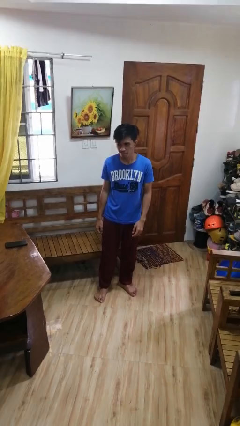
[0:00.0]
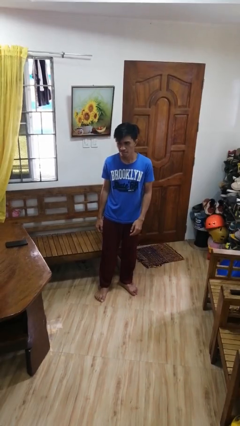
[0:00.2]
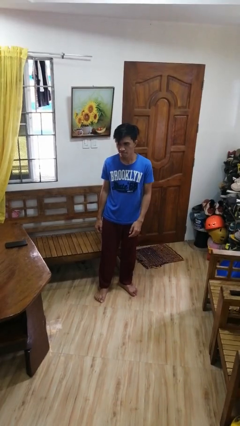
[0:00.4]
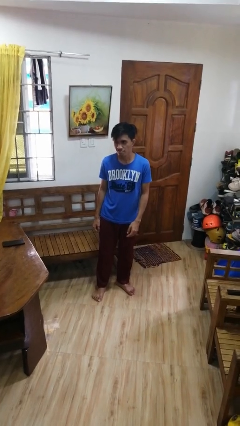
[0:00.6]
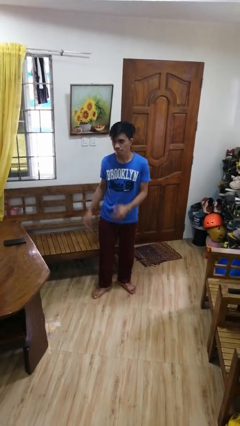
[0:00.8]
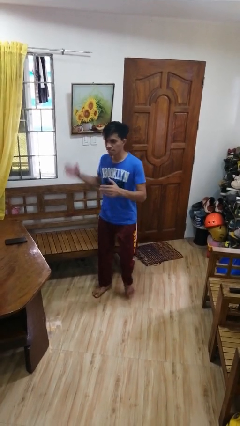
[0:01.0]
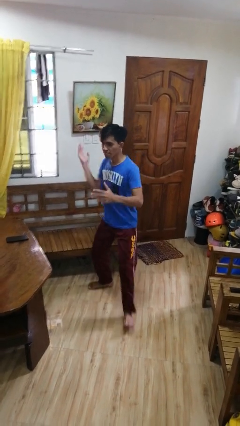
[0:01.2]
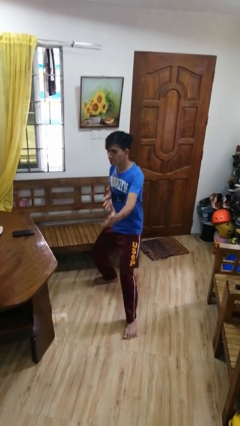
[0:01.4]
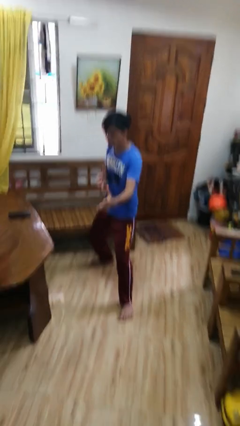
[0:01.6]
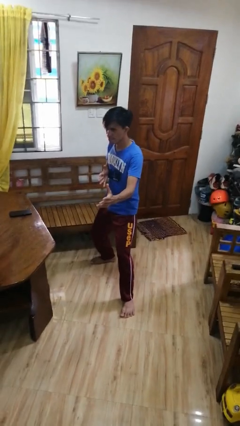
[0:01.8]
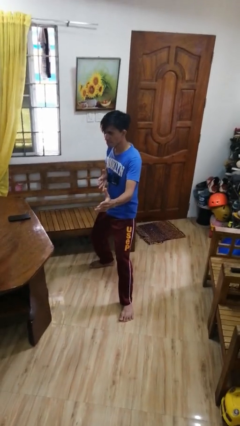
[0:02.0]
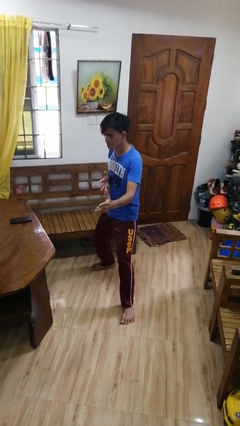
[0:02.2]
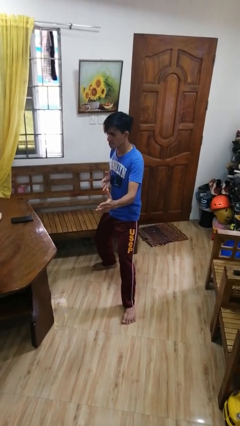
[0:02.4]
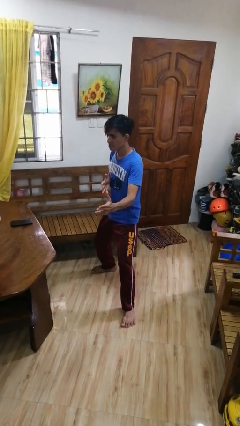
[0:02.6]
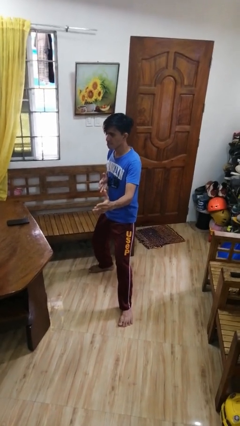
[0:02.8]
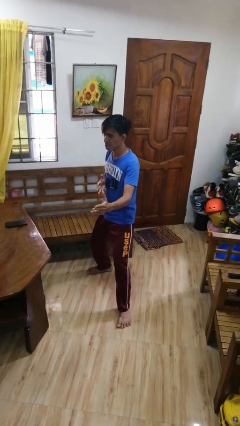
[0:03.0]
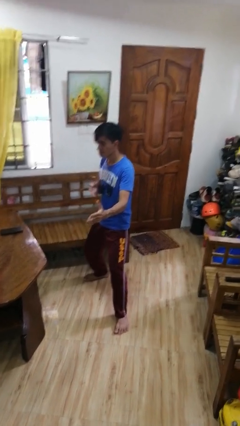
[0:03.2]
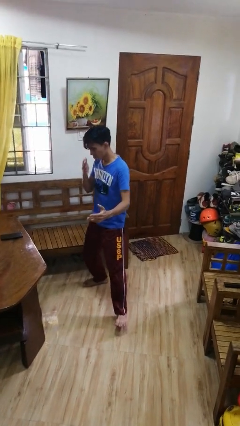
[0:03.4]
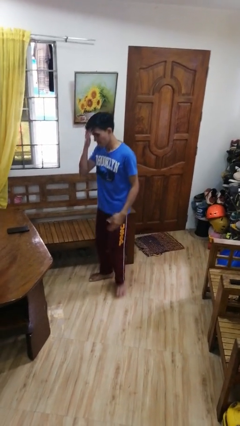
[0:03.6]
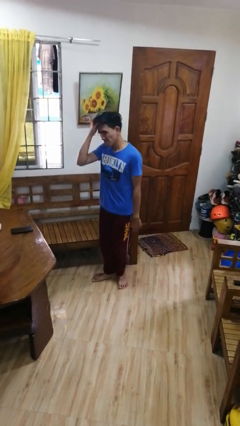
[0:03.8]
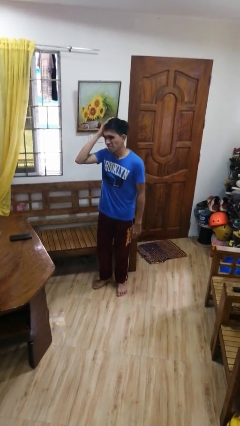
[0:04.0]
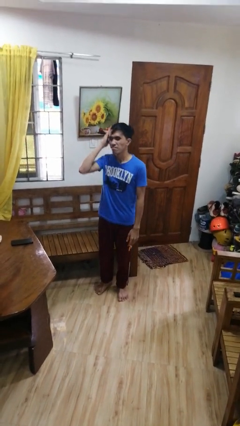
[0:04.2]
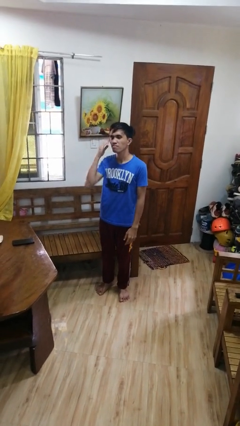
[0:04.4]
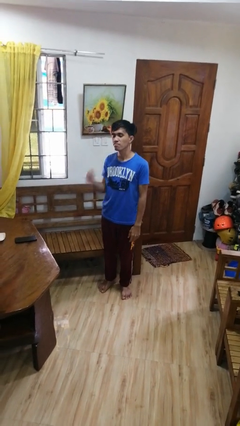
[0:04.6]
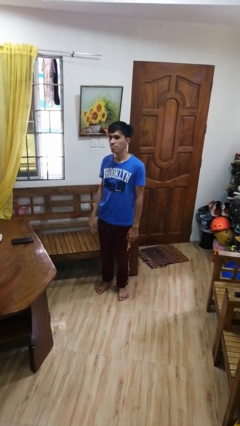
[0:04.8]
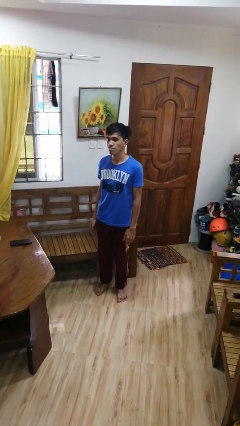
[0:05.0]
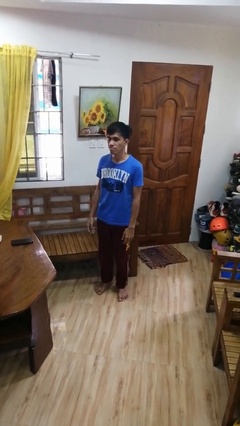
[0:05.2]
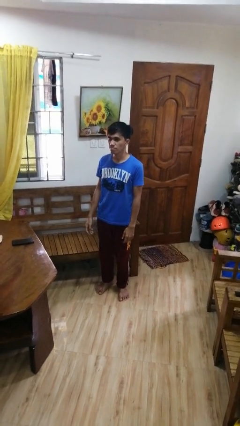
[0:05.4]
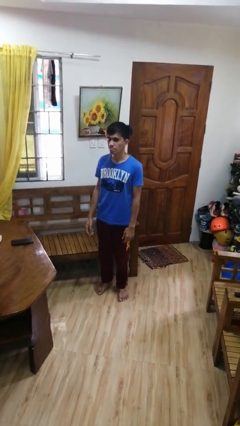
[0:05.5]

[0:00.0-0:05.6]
person karate chop

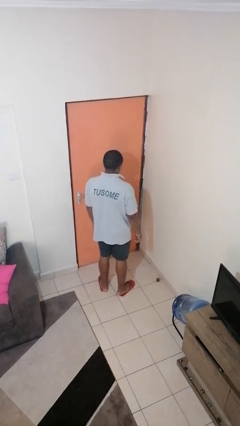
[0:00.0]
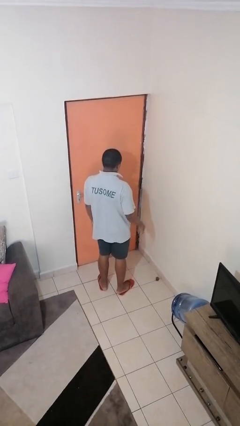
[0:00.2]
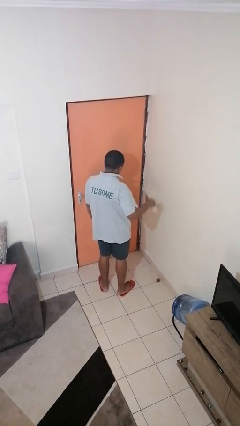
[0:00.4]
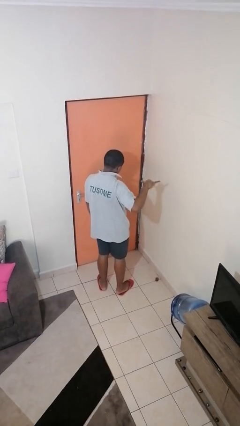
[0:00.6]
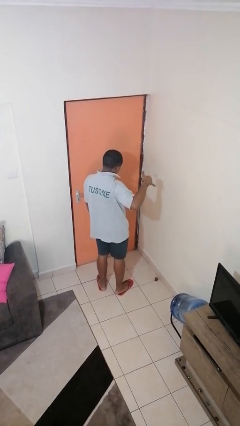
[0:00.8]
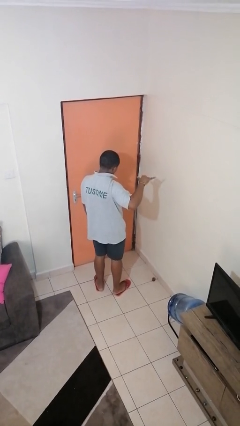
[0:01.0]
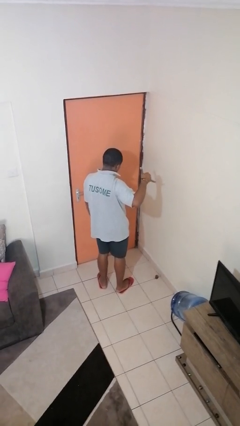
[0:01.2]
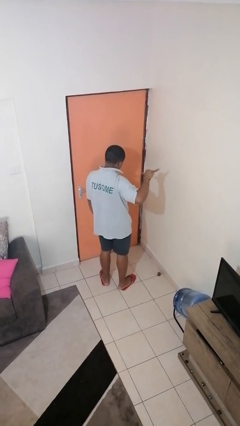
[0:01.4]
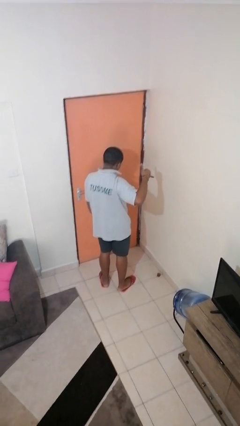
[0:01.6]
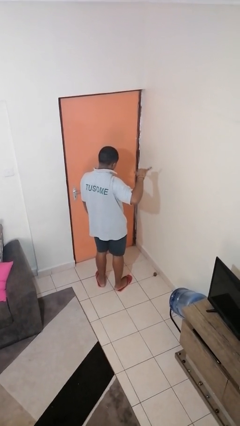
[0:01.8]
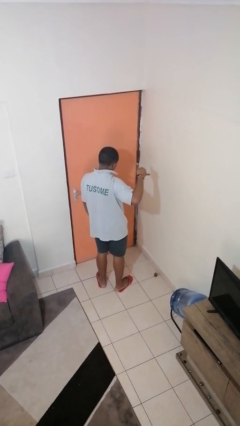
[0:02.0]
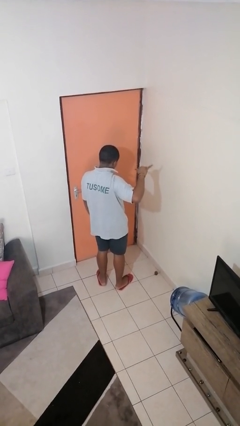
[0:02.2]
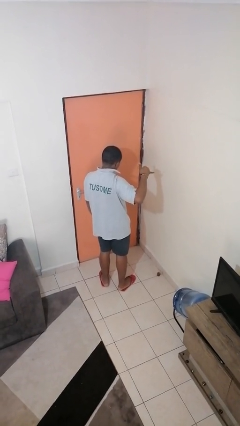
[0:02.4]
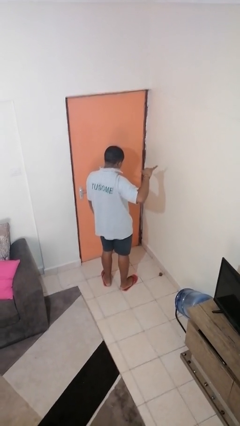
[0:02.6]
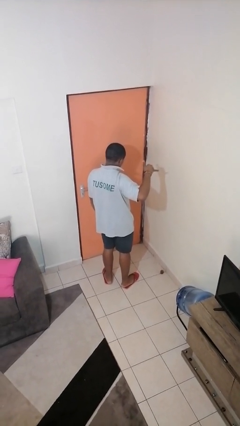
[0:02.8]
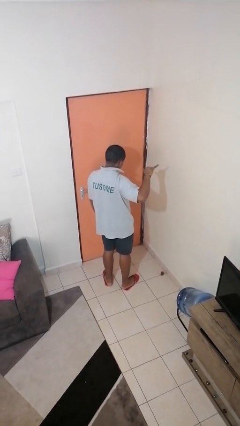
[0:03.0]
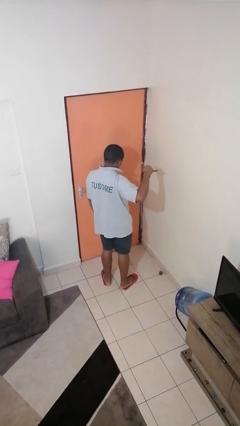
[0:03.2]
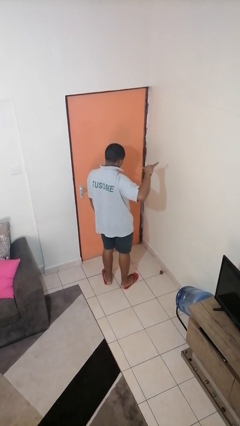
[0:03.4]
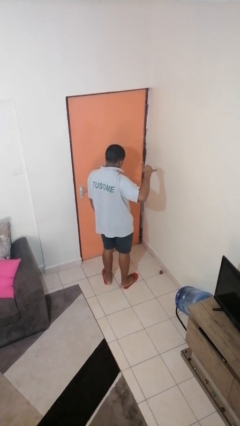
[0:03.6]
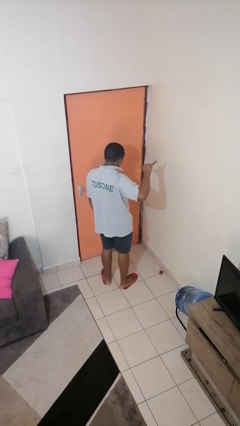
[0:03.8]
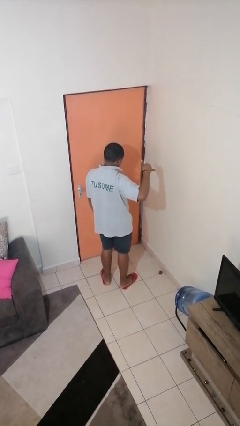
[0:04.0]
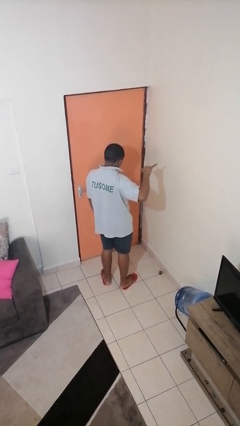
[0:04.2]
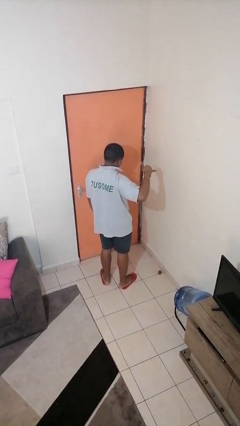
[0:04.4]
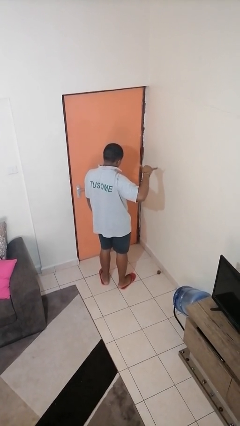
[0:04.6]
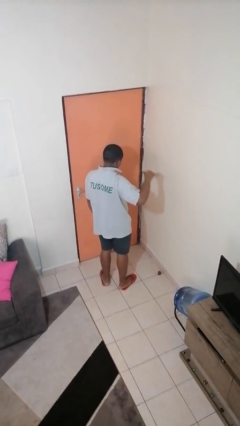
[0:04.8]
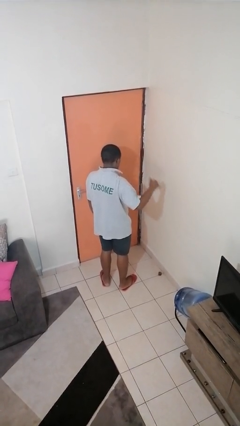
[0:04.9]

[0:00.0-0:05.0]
person gestures hang loose

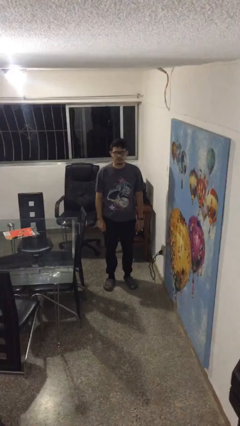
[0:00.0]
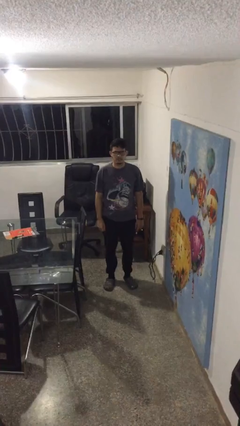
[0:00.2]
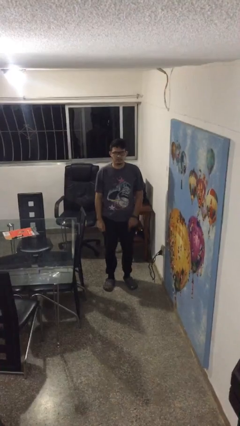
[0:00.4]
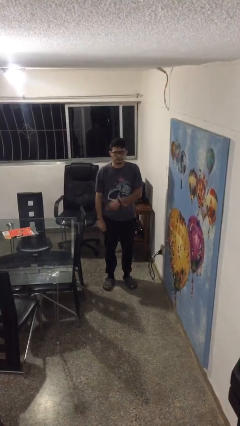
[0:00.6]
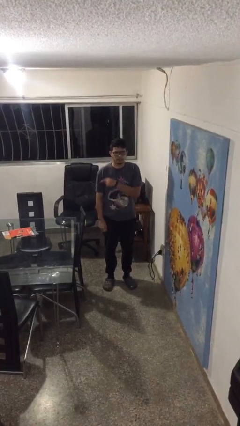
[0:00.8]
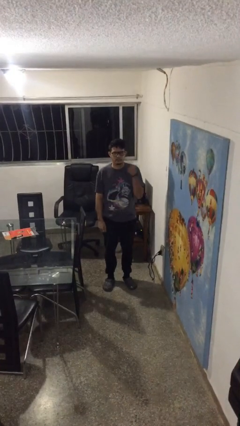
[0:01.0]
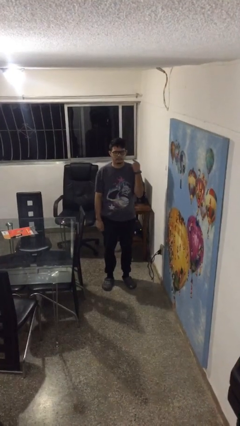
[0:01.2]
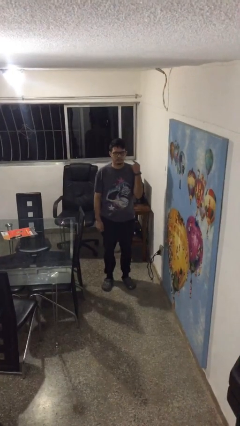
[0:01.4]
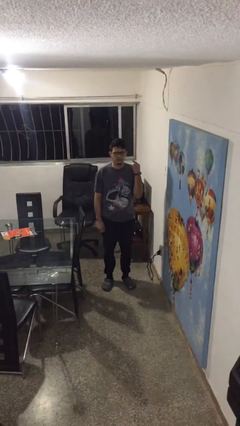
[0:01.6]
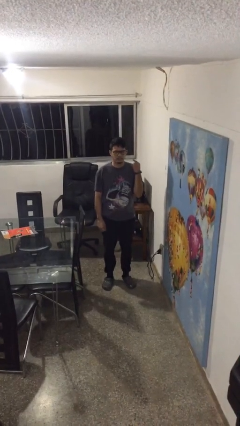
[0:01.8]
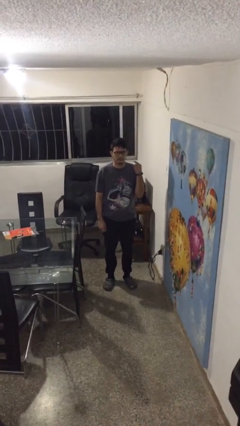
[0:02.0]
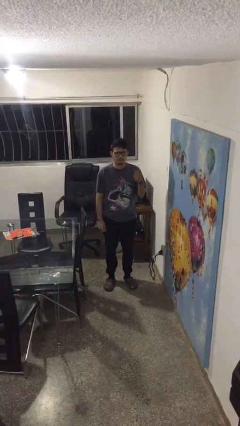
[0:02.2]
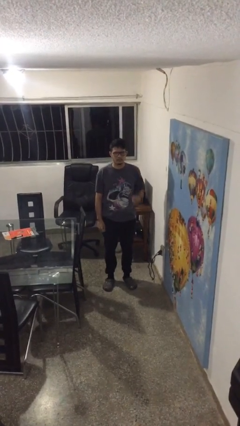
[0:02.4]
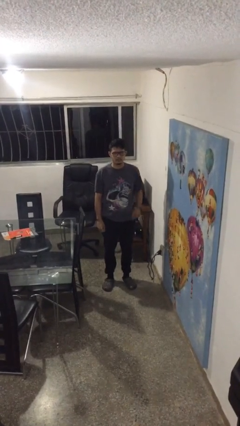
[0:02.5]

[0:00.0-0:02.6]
person gestures cut

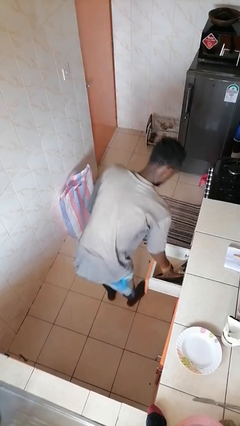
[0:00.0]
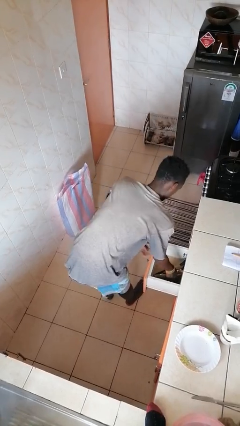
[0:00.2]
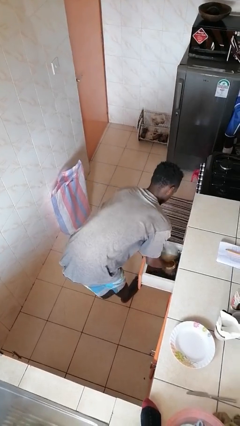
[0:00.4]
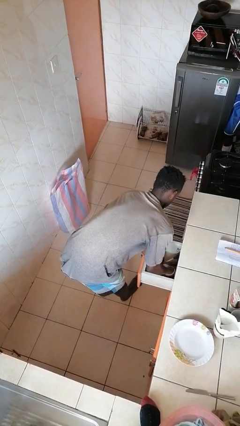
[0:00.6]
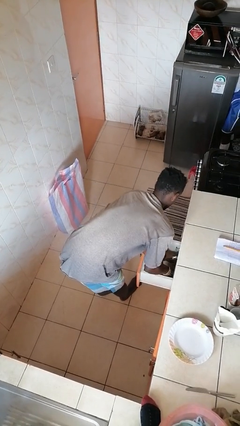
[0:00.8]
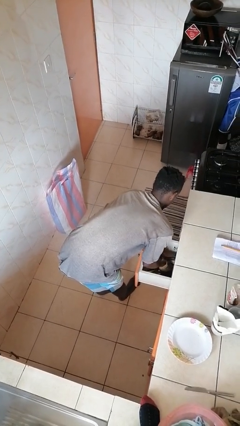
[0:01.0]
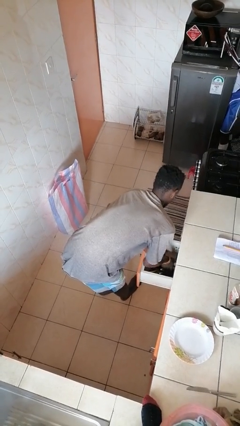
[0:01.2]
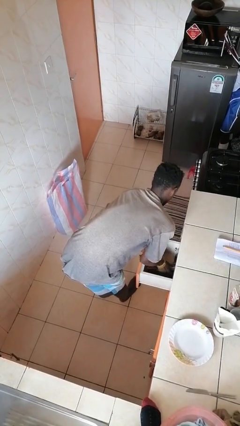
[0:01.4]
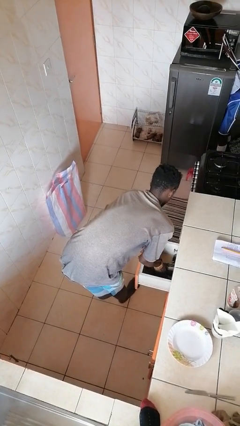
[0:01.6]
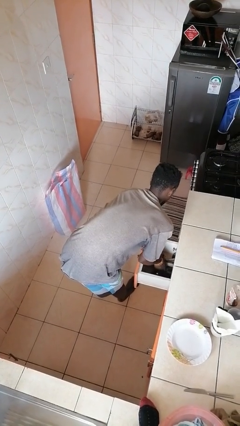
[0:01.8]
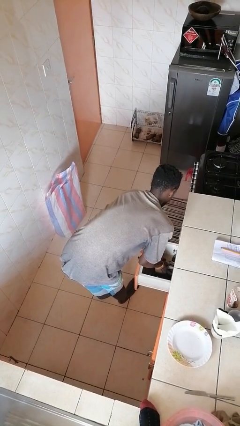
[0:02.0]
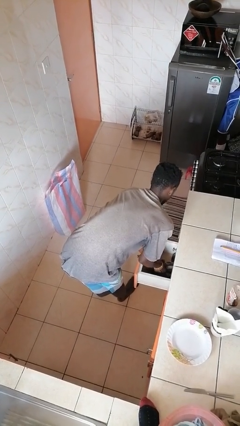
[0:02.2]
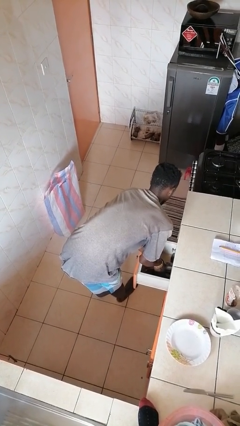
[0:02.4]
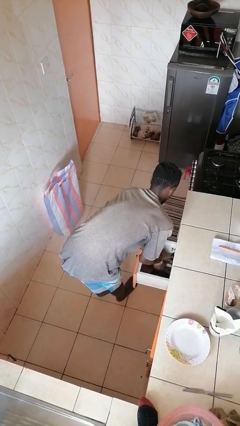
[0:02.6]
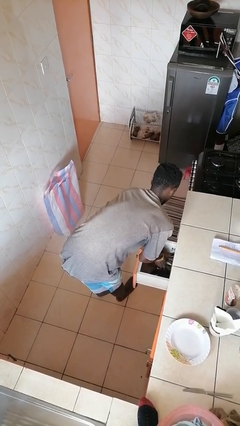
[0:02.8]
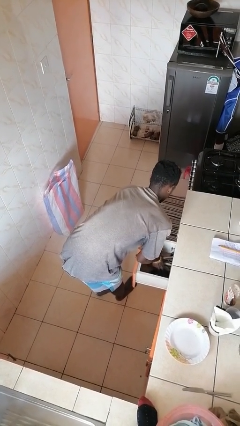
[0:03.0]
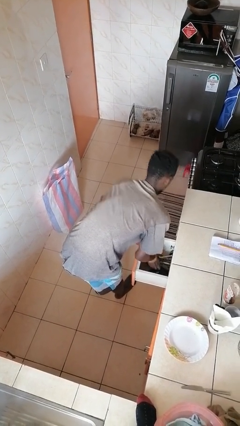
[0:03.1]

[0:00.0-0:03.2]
person searches in kitchen drawer

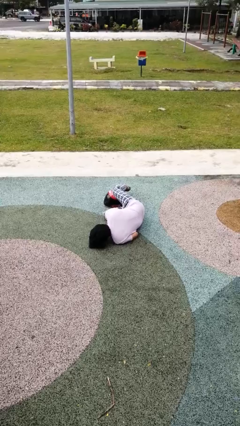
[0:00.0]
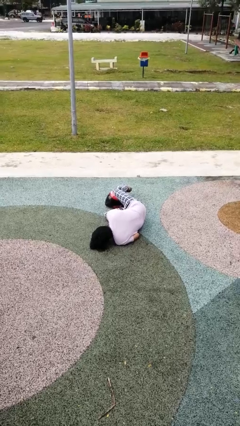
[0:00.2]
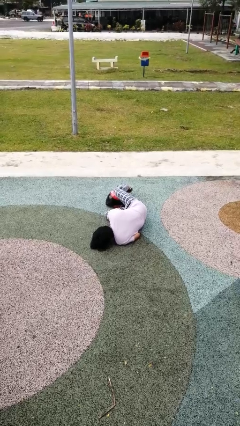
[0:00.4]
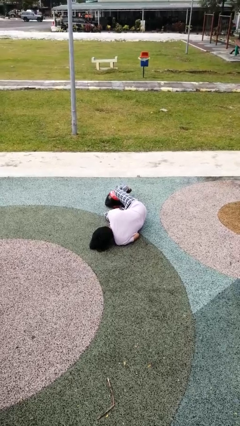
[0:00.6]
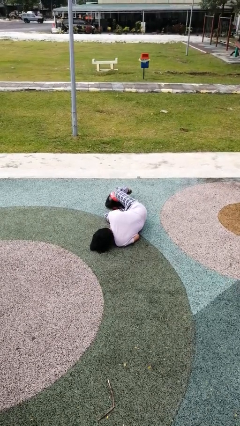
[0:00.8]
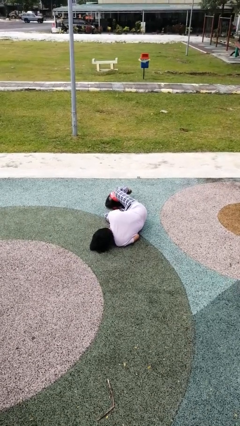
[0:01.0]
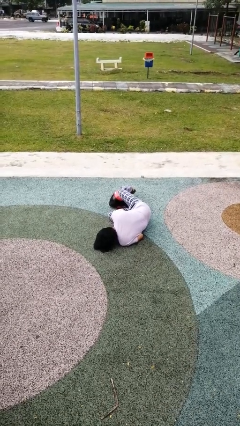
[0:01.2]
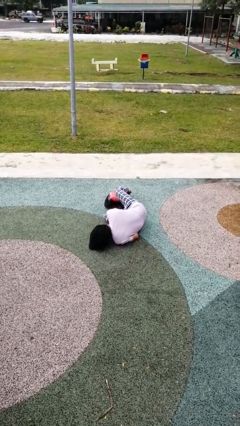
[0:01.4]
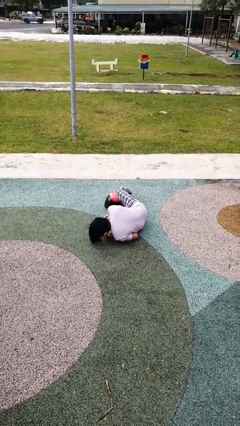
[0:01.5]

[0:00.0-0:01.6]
person lies down on floor
